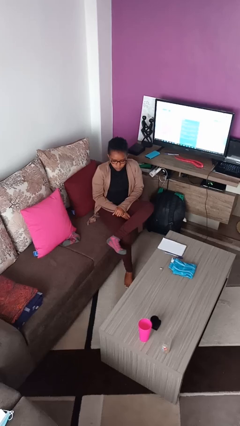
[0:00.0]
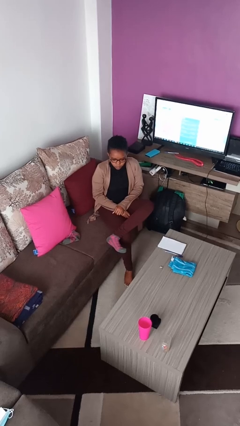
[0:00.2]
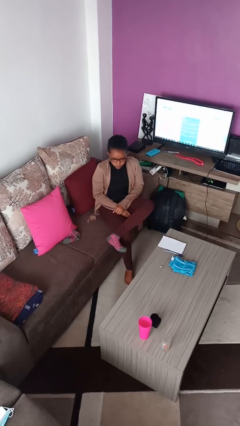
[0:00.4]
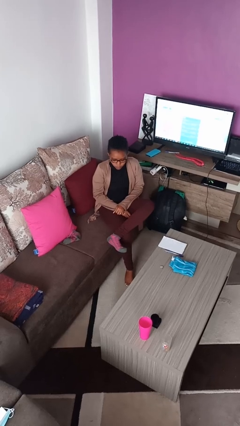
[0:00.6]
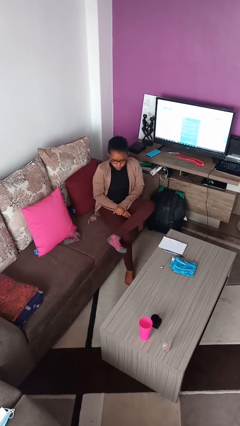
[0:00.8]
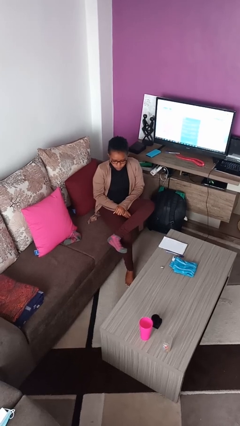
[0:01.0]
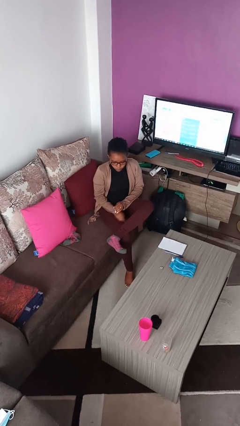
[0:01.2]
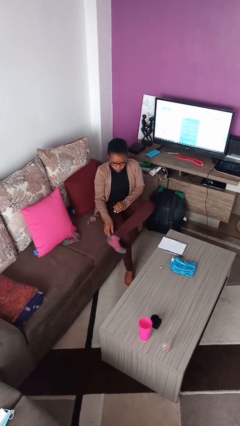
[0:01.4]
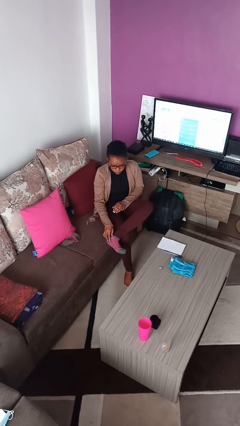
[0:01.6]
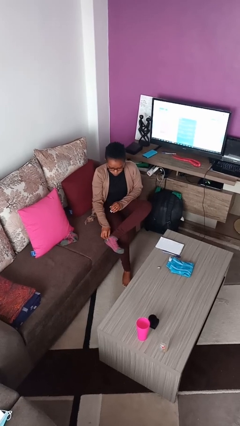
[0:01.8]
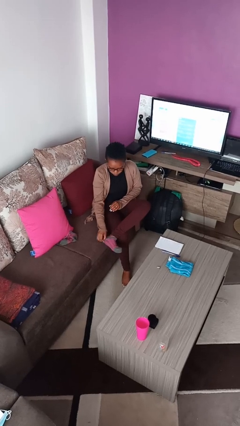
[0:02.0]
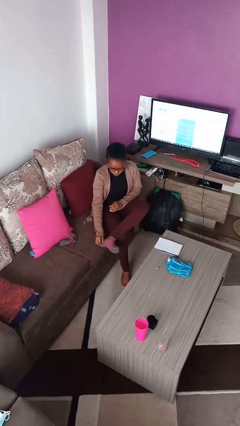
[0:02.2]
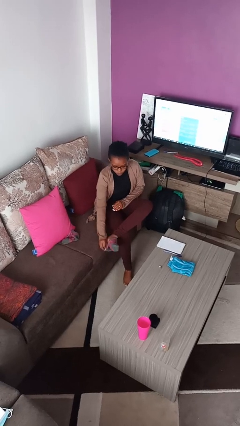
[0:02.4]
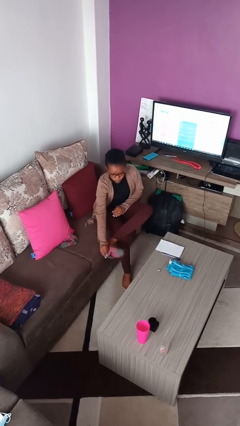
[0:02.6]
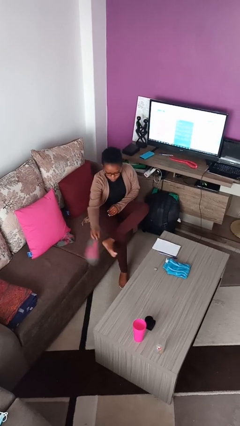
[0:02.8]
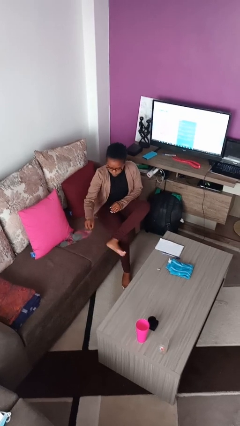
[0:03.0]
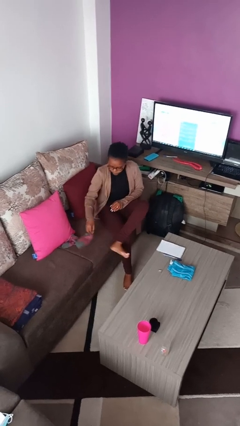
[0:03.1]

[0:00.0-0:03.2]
person takes off socks

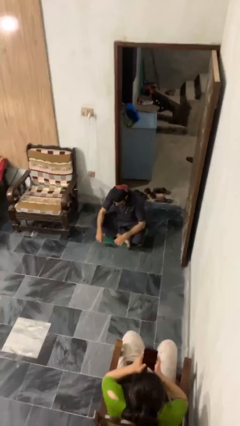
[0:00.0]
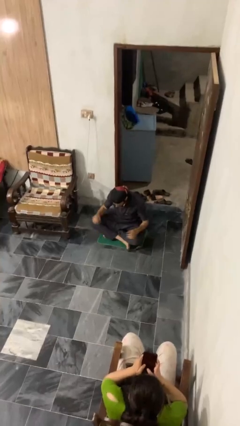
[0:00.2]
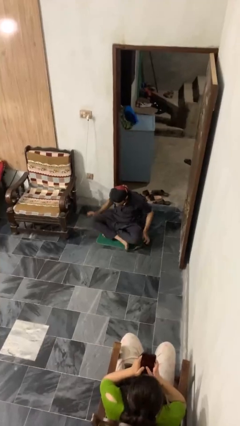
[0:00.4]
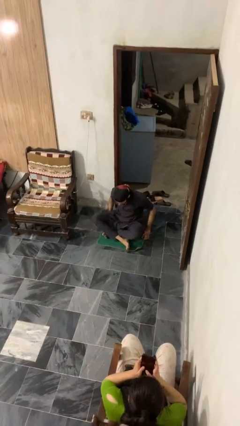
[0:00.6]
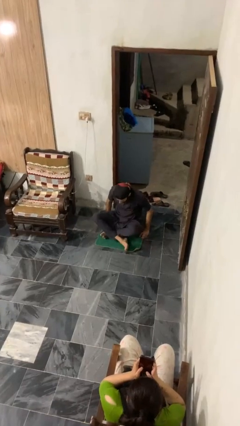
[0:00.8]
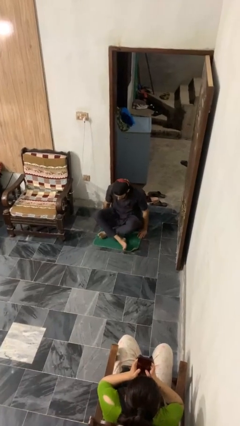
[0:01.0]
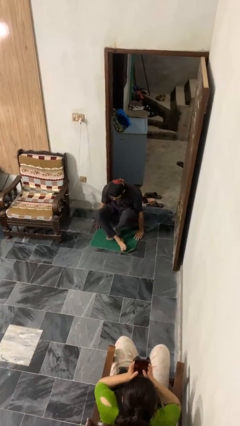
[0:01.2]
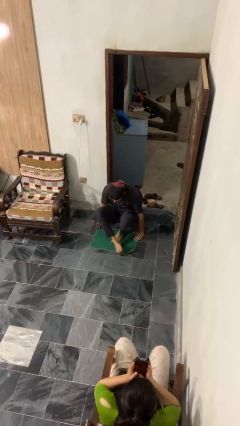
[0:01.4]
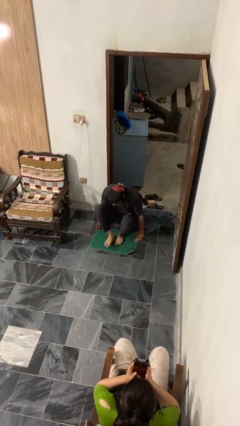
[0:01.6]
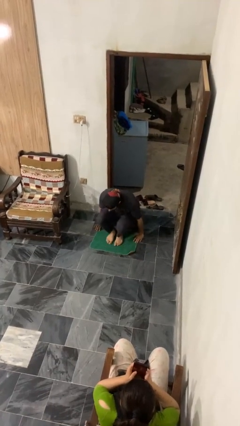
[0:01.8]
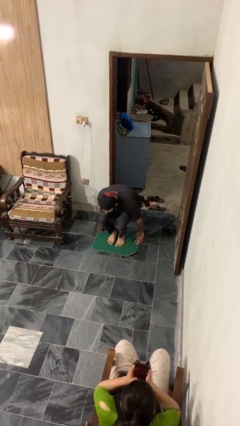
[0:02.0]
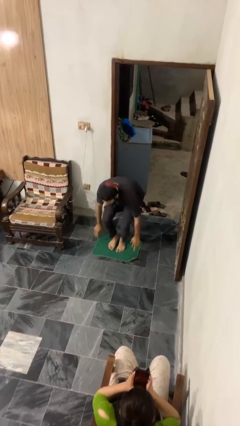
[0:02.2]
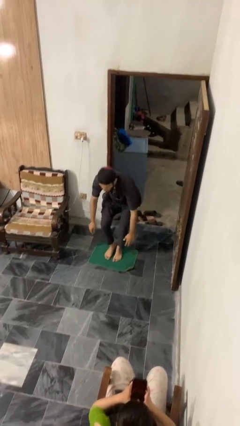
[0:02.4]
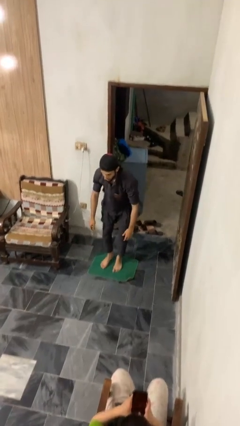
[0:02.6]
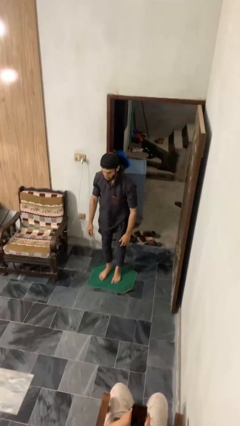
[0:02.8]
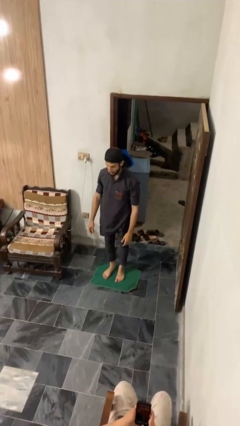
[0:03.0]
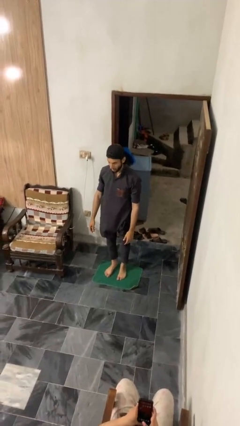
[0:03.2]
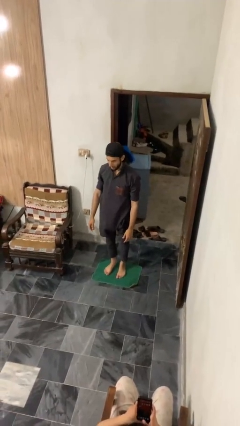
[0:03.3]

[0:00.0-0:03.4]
person stands up from floor

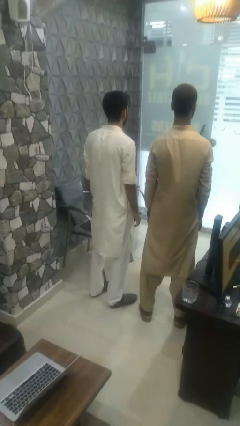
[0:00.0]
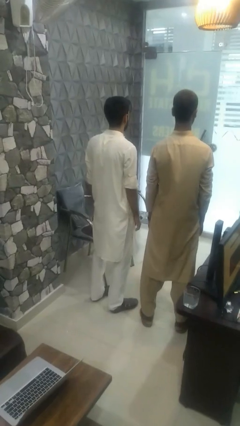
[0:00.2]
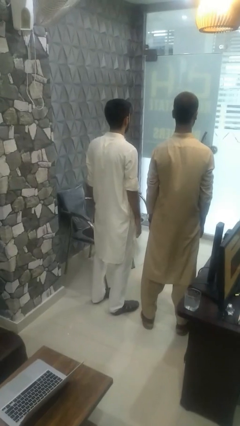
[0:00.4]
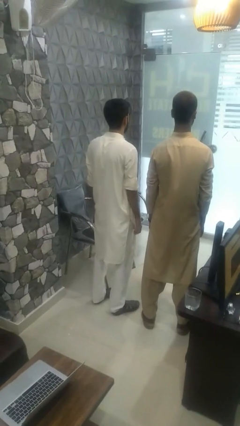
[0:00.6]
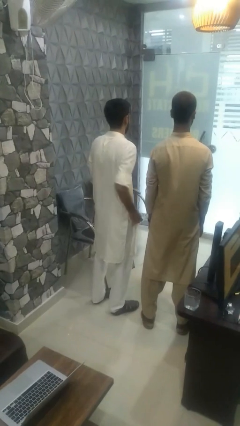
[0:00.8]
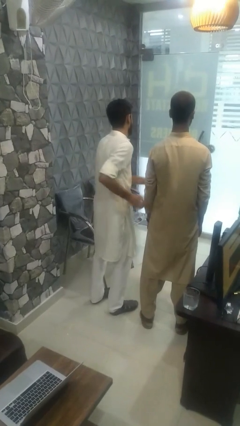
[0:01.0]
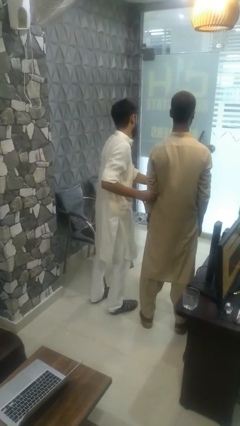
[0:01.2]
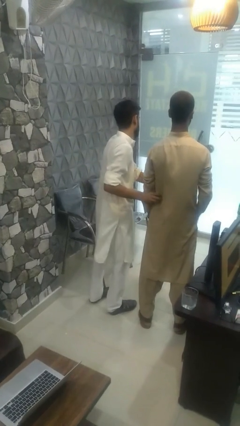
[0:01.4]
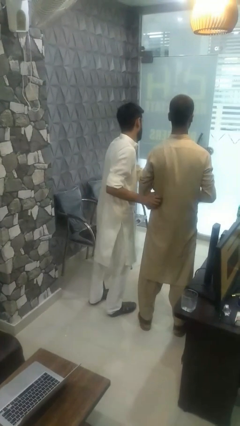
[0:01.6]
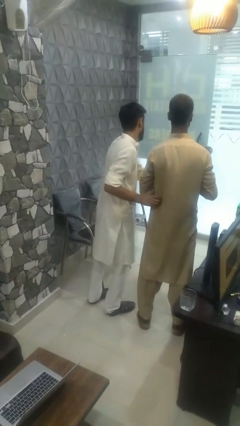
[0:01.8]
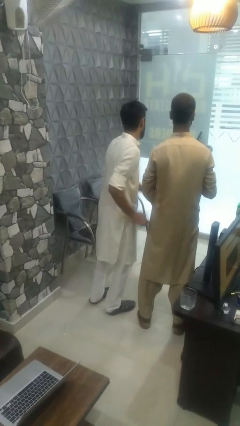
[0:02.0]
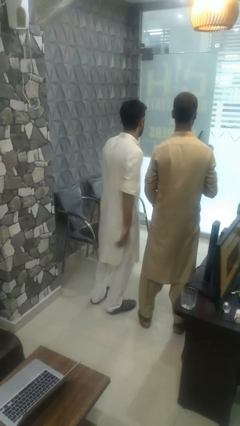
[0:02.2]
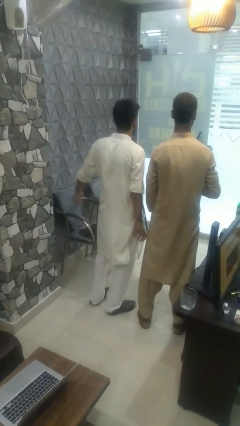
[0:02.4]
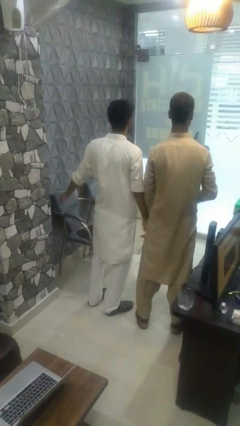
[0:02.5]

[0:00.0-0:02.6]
person tickles person

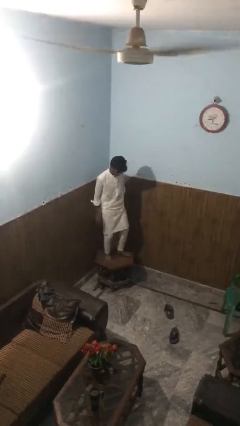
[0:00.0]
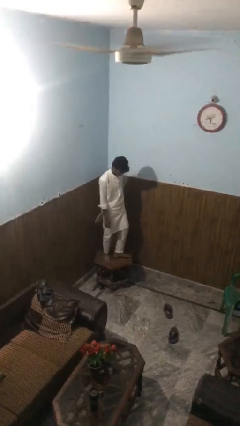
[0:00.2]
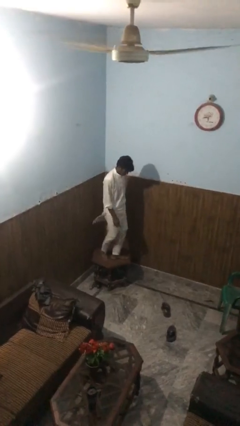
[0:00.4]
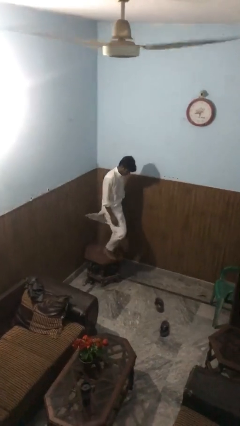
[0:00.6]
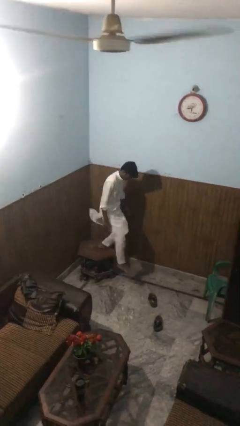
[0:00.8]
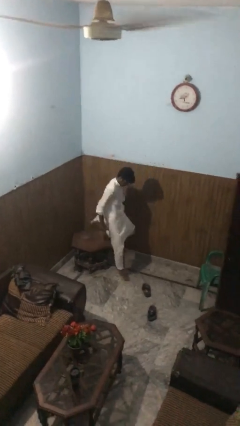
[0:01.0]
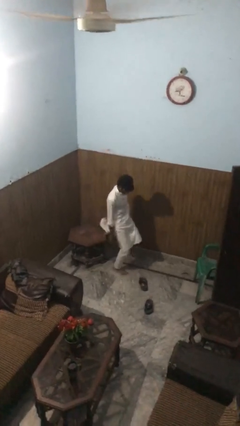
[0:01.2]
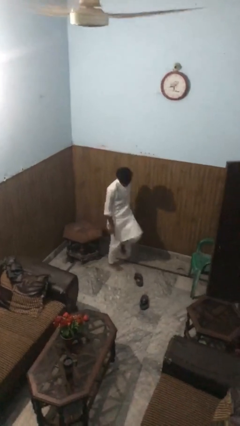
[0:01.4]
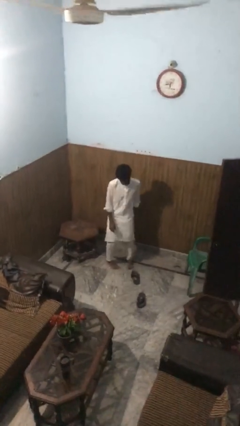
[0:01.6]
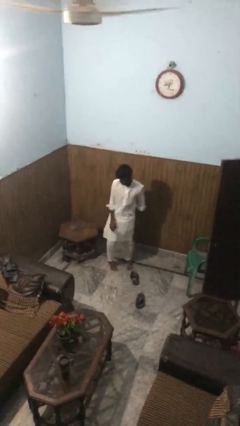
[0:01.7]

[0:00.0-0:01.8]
person climbs off table

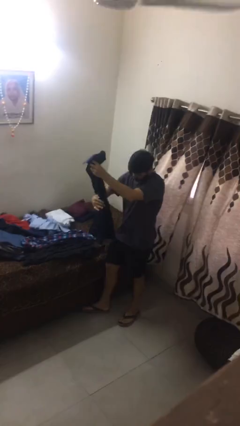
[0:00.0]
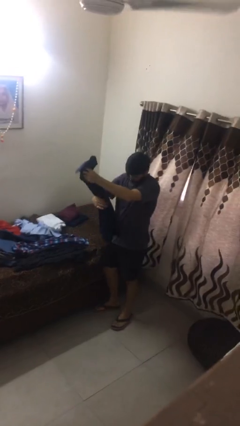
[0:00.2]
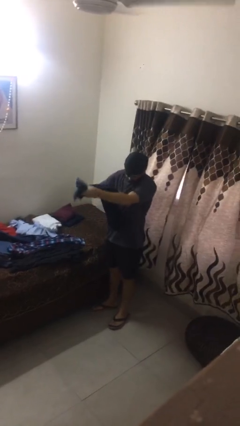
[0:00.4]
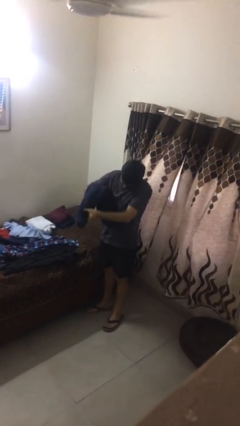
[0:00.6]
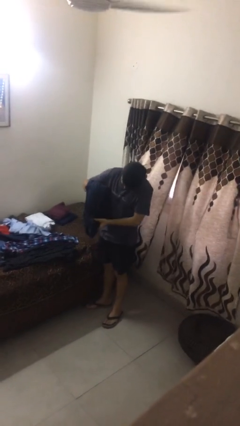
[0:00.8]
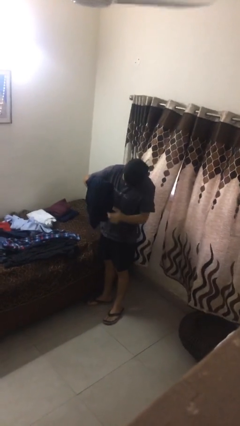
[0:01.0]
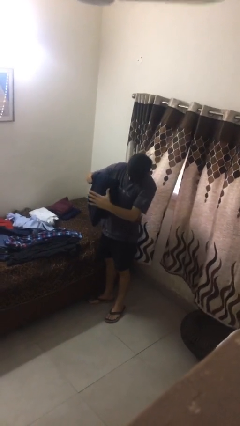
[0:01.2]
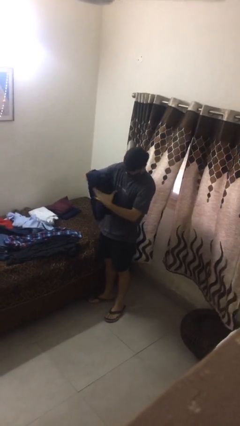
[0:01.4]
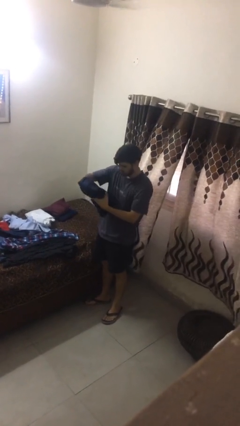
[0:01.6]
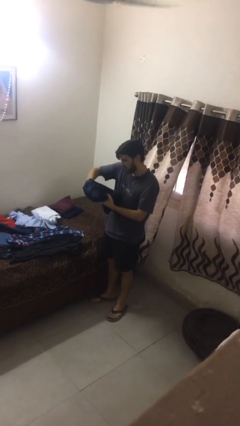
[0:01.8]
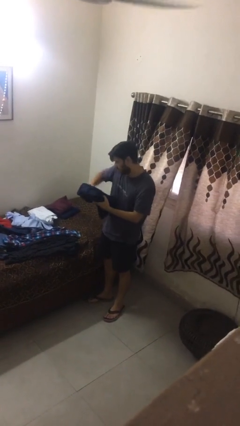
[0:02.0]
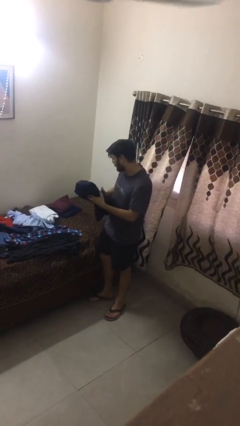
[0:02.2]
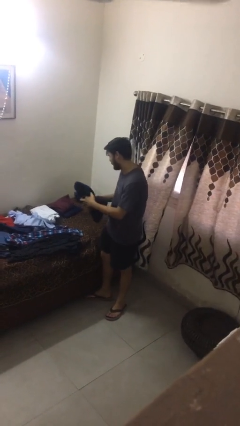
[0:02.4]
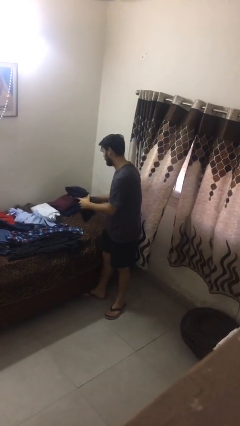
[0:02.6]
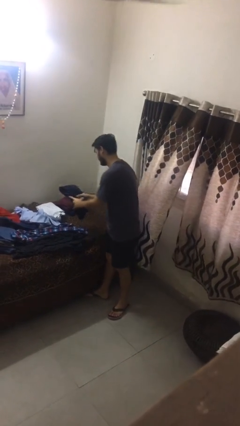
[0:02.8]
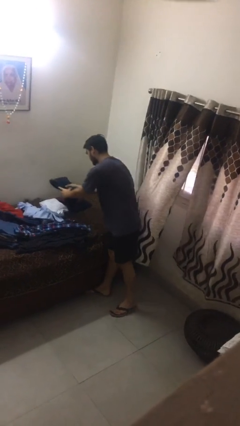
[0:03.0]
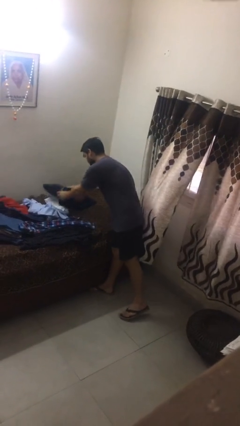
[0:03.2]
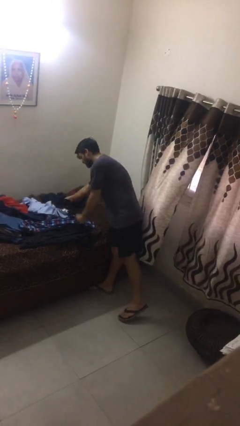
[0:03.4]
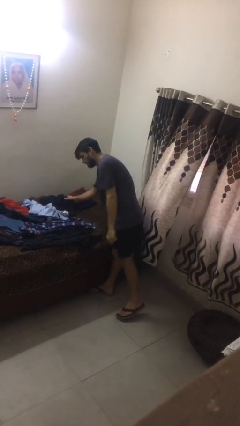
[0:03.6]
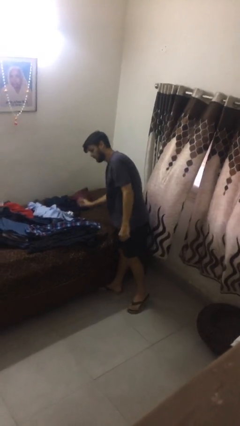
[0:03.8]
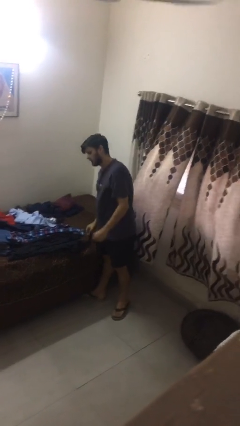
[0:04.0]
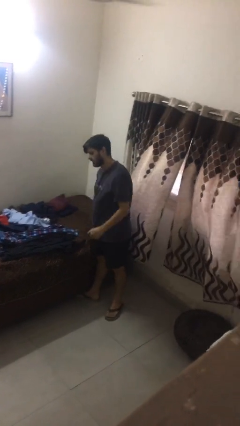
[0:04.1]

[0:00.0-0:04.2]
person folds shirt

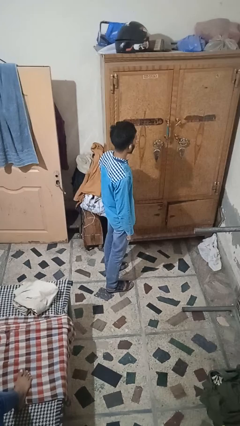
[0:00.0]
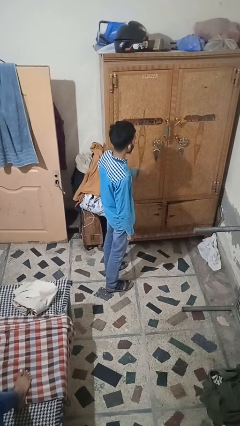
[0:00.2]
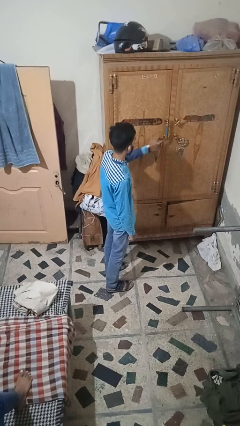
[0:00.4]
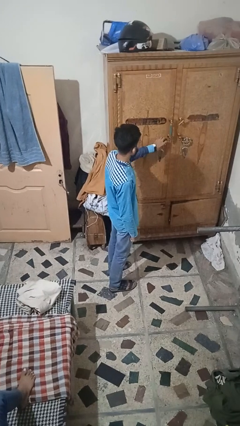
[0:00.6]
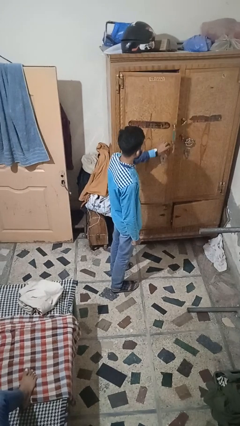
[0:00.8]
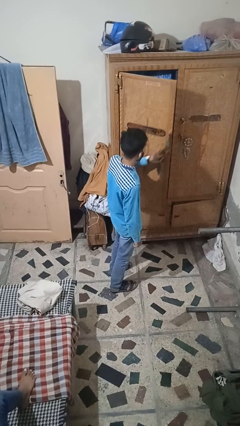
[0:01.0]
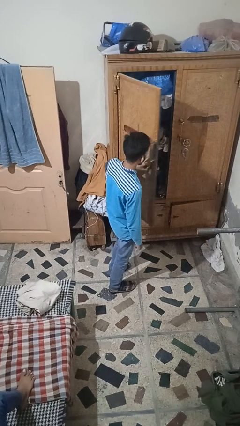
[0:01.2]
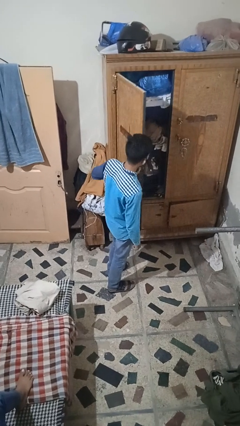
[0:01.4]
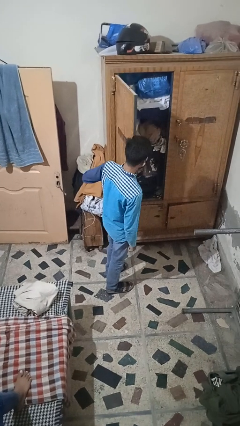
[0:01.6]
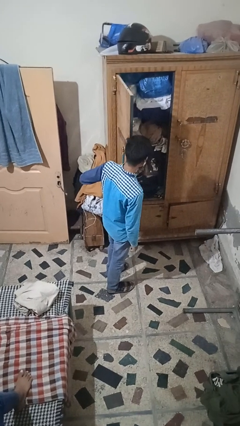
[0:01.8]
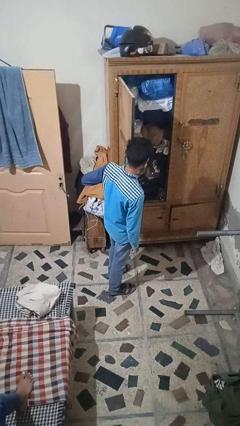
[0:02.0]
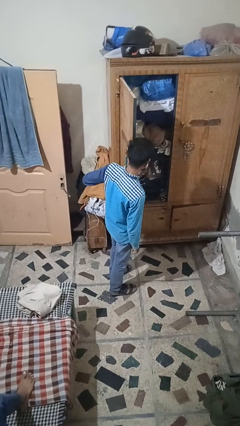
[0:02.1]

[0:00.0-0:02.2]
person opens closet door
